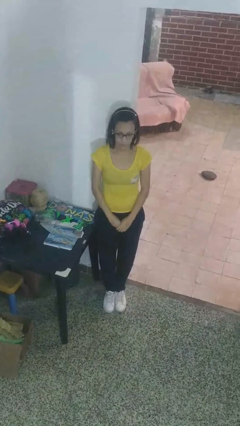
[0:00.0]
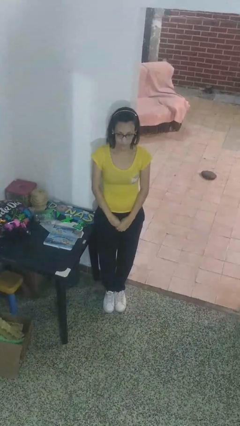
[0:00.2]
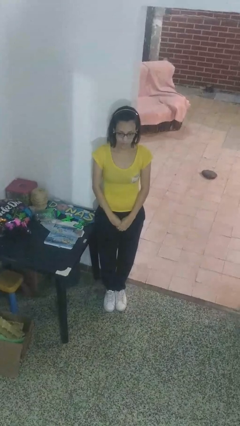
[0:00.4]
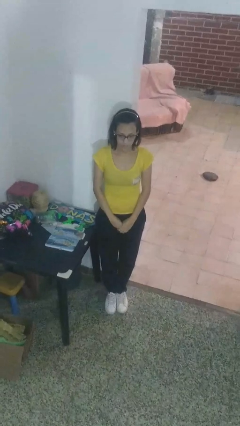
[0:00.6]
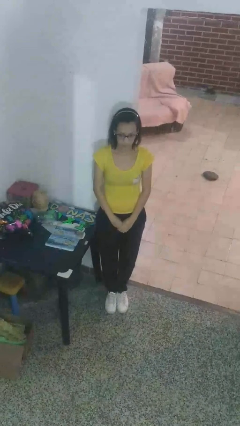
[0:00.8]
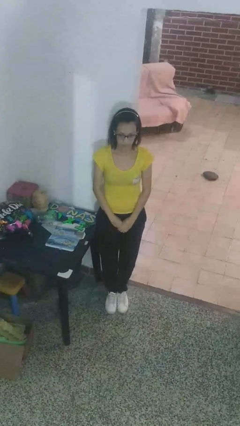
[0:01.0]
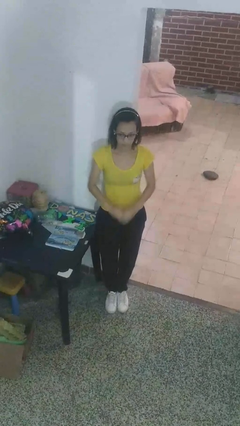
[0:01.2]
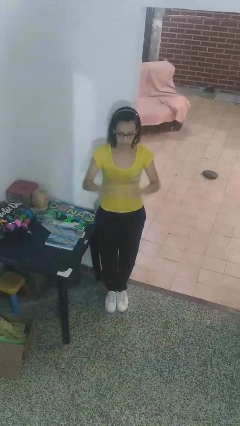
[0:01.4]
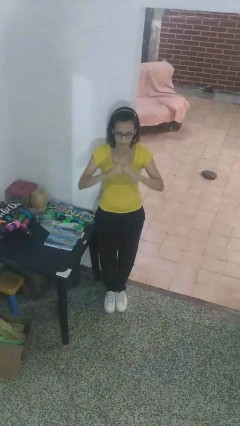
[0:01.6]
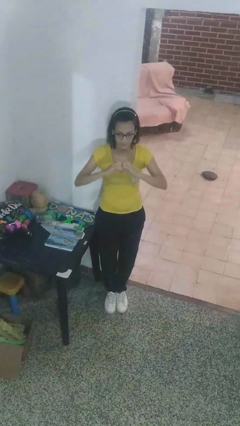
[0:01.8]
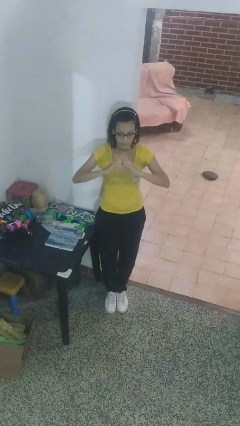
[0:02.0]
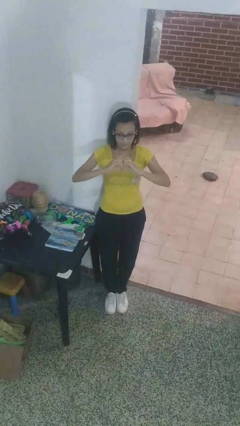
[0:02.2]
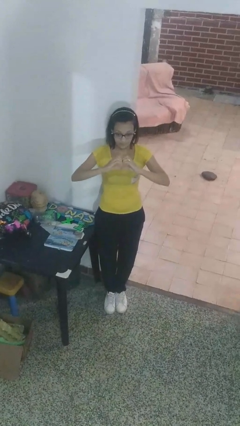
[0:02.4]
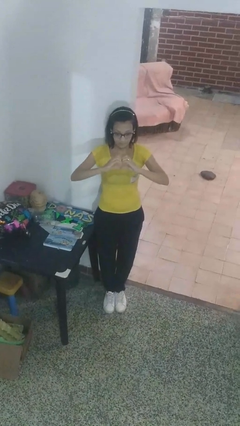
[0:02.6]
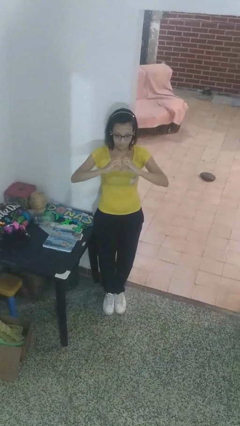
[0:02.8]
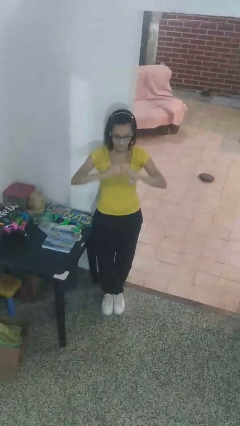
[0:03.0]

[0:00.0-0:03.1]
person gestures heart

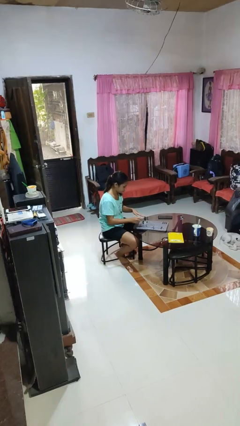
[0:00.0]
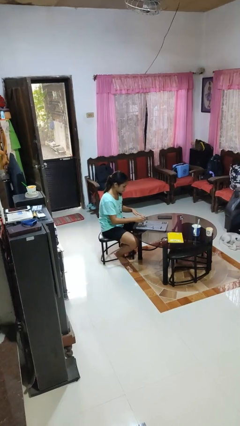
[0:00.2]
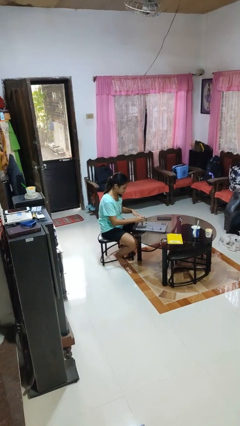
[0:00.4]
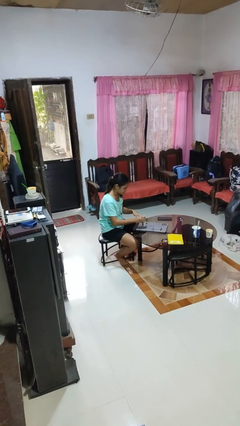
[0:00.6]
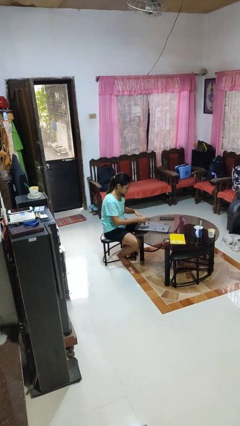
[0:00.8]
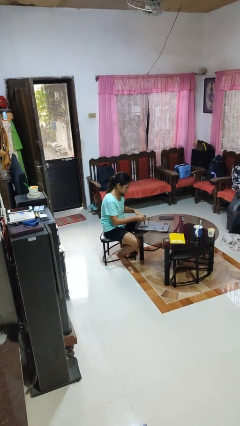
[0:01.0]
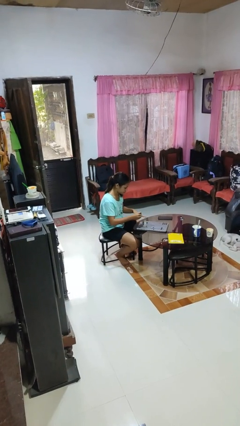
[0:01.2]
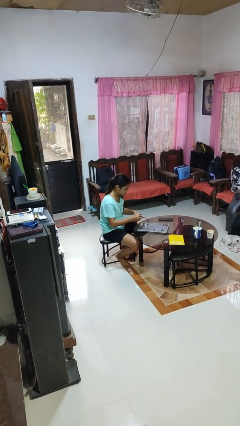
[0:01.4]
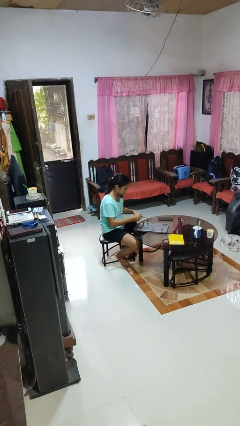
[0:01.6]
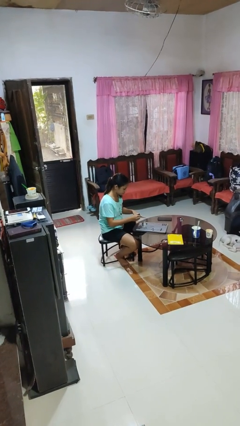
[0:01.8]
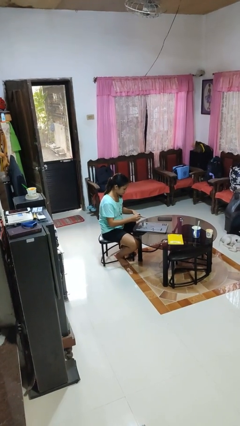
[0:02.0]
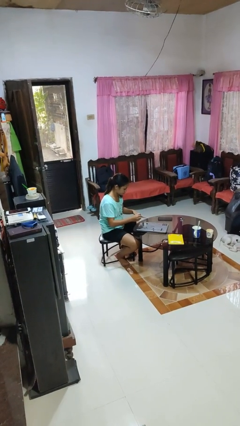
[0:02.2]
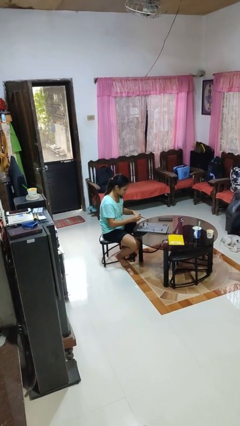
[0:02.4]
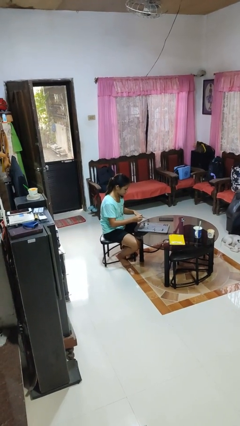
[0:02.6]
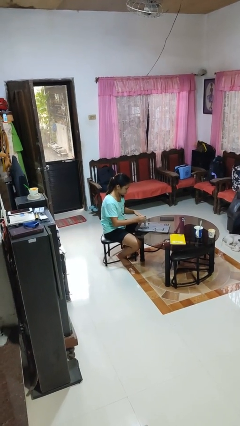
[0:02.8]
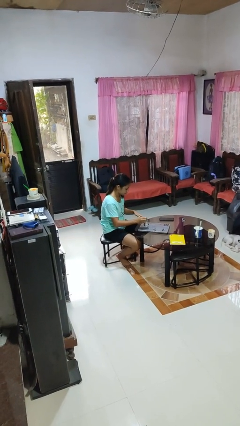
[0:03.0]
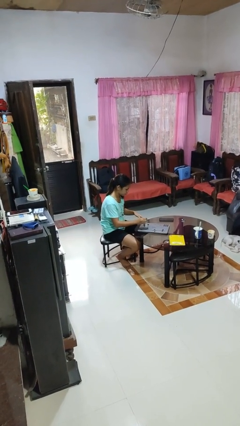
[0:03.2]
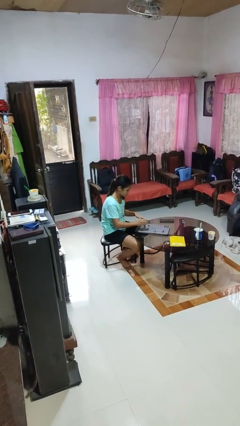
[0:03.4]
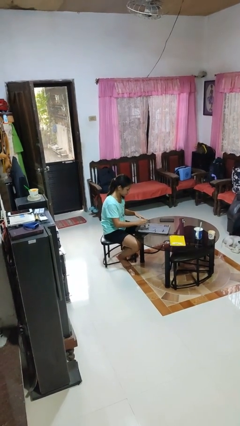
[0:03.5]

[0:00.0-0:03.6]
person paints fingernails

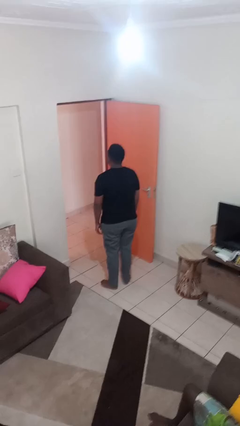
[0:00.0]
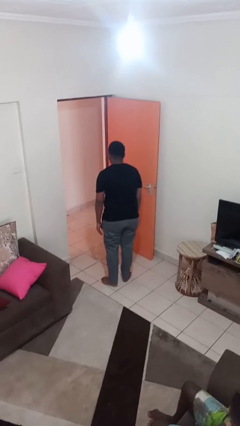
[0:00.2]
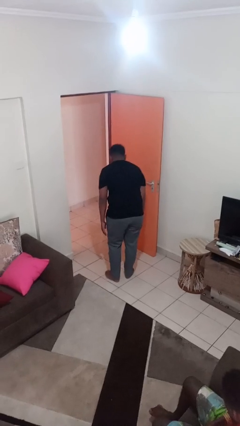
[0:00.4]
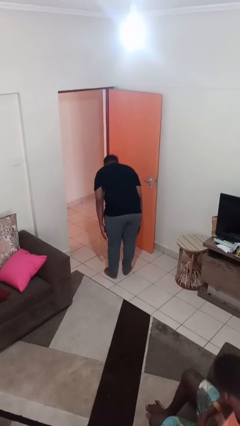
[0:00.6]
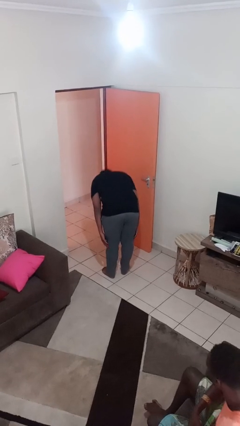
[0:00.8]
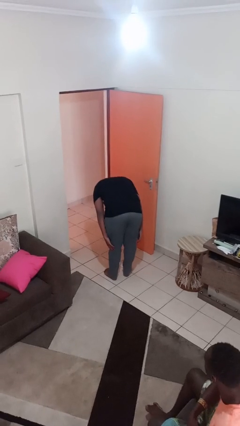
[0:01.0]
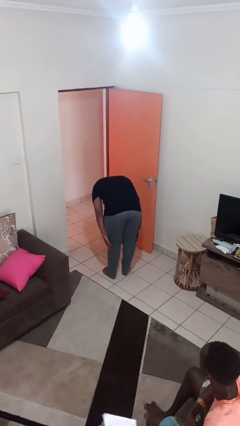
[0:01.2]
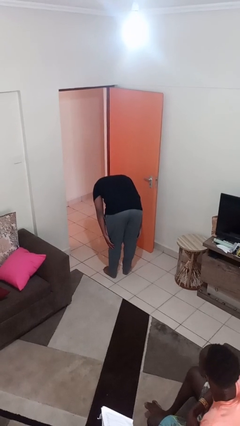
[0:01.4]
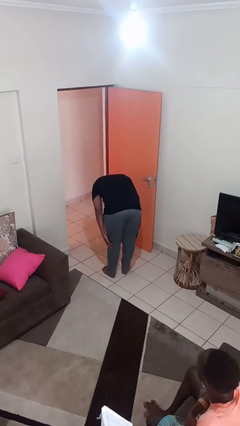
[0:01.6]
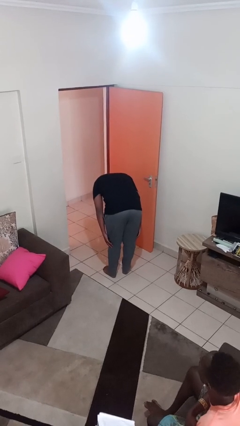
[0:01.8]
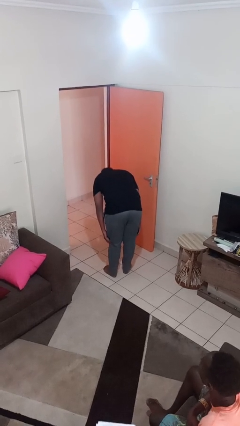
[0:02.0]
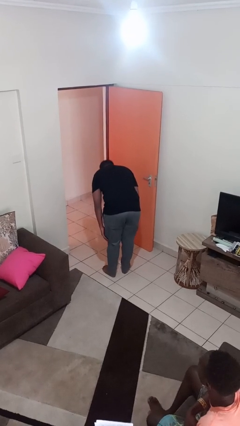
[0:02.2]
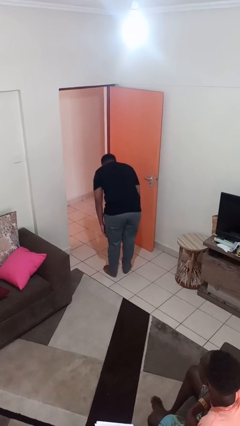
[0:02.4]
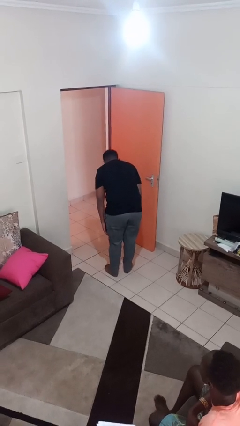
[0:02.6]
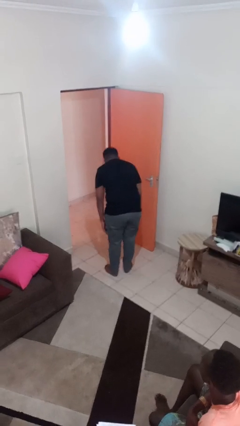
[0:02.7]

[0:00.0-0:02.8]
person bows

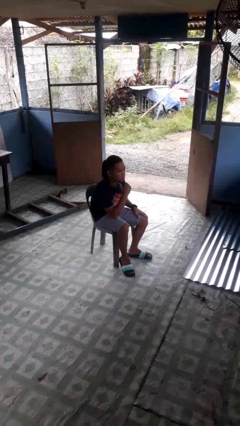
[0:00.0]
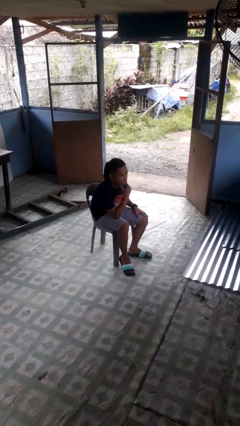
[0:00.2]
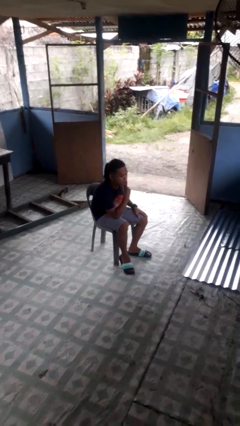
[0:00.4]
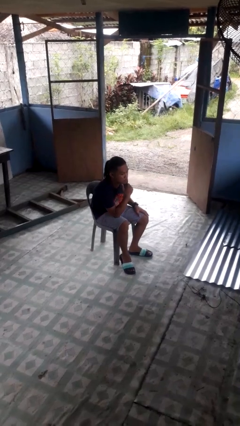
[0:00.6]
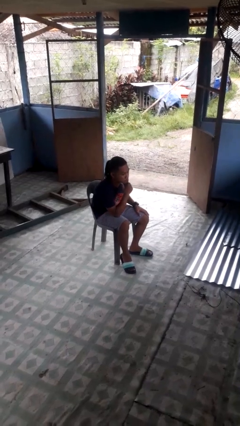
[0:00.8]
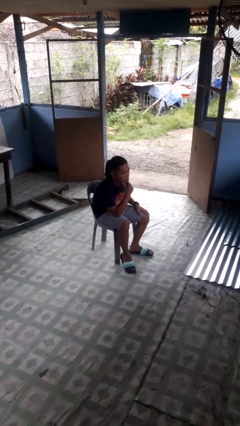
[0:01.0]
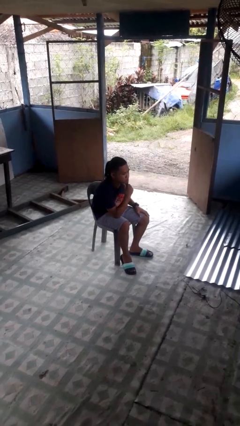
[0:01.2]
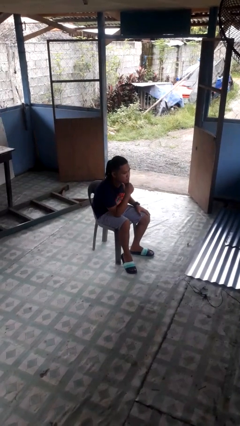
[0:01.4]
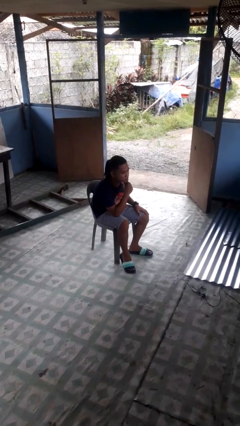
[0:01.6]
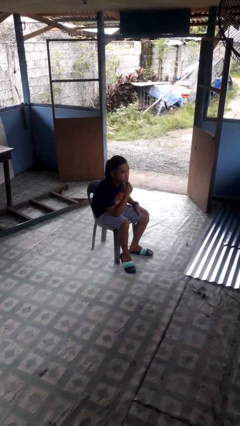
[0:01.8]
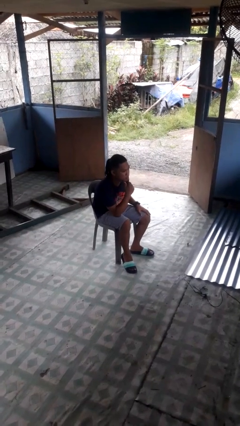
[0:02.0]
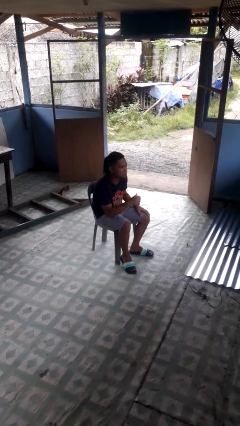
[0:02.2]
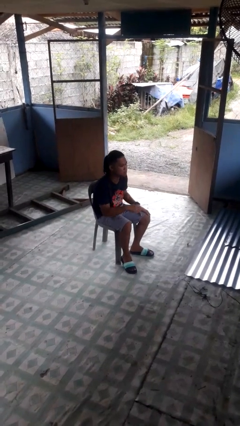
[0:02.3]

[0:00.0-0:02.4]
person strokes chin

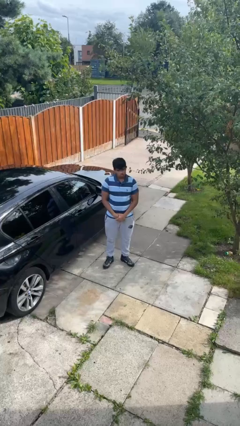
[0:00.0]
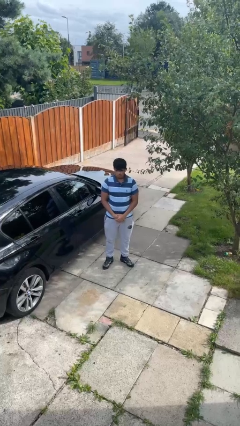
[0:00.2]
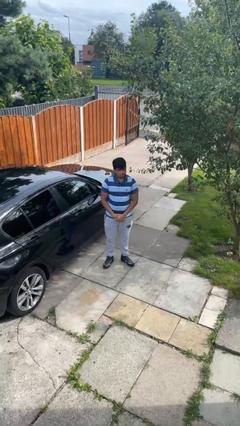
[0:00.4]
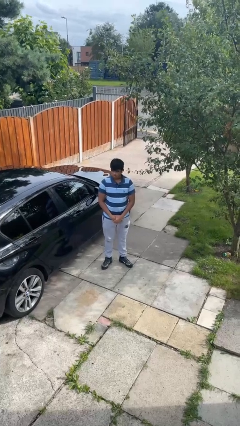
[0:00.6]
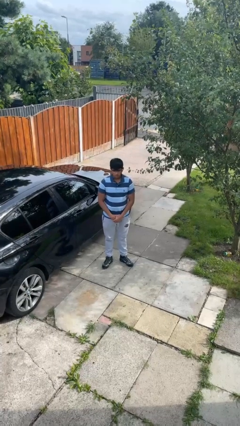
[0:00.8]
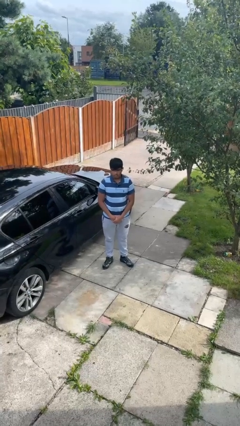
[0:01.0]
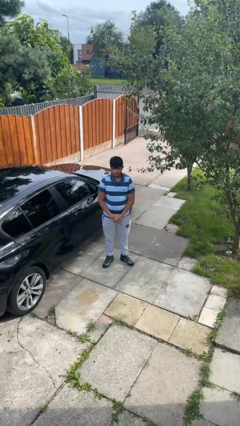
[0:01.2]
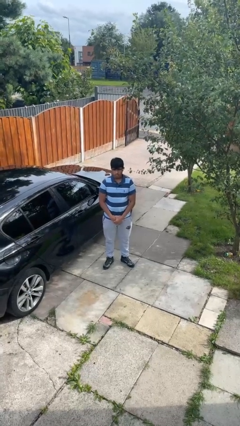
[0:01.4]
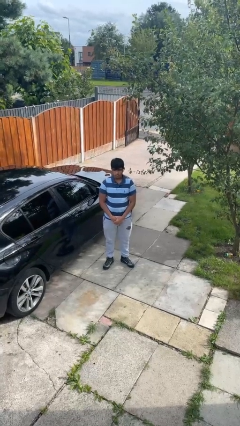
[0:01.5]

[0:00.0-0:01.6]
person shakes head

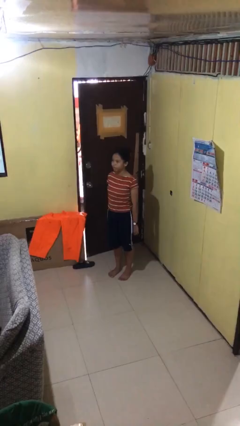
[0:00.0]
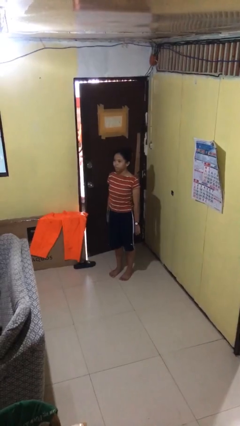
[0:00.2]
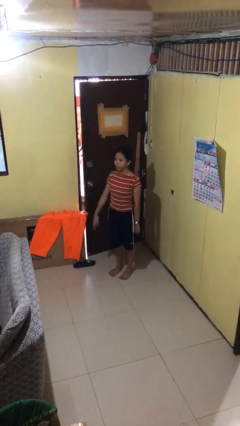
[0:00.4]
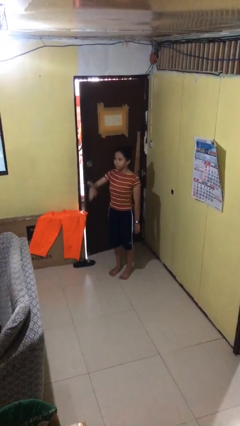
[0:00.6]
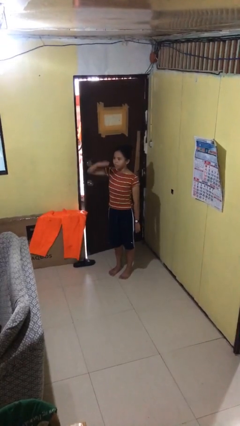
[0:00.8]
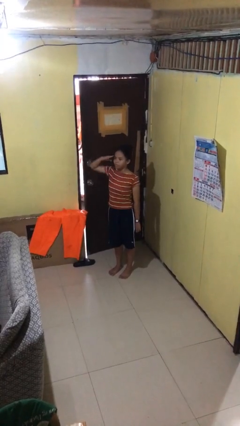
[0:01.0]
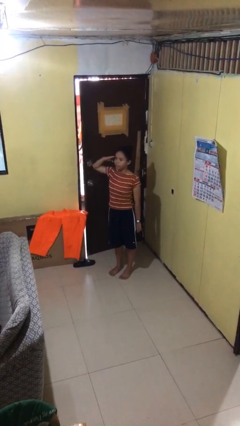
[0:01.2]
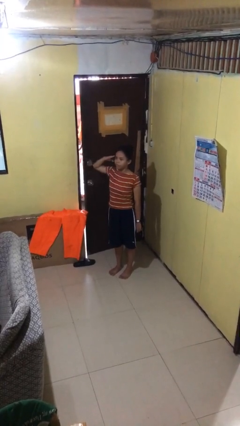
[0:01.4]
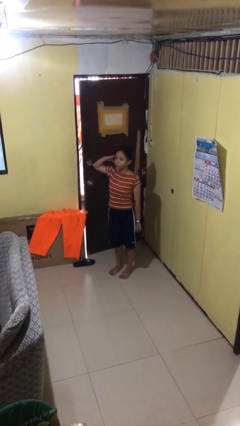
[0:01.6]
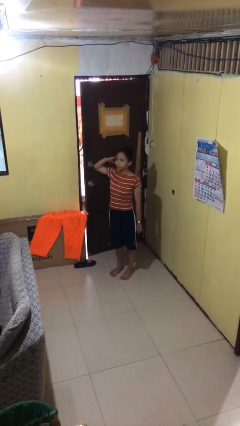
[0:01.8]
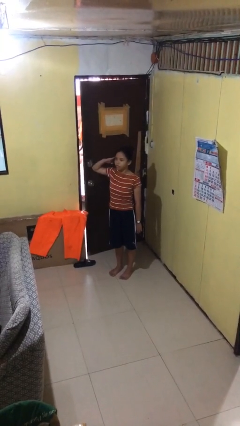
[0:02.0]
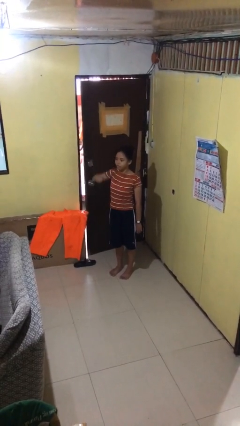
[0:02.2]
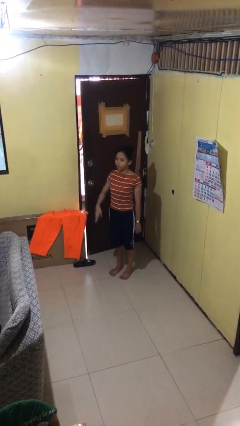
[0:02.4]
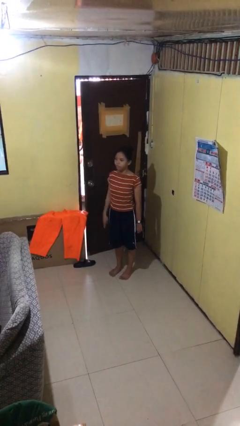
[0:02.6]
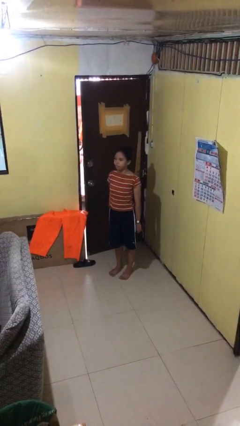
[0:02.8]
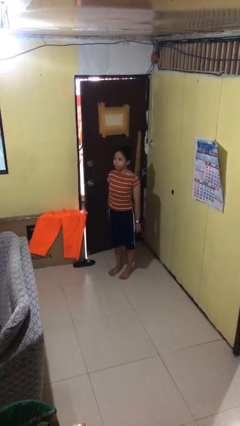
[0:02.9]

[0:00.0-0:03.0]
person salutes

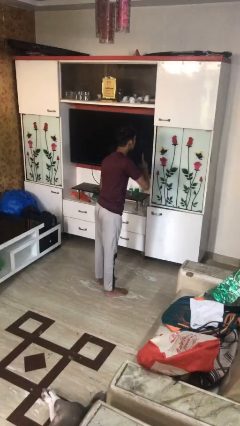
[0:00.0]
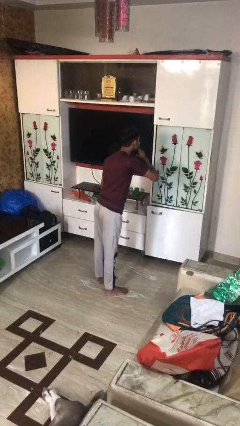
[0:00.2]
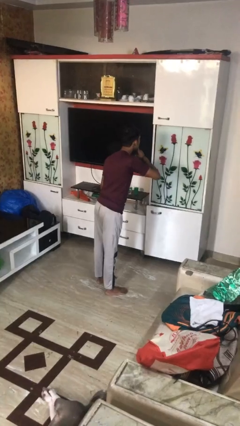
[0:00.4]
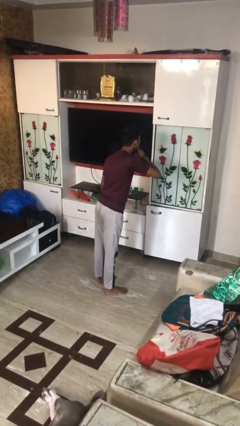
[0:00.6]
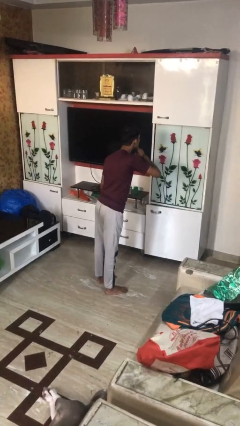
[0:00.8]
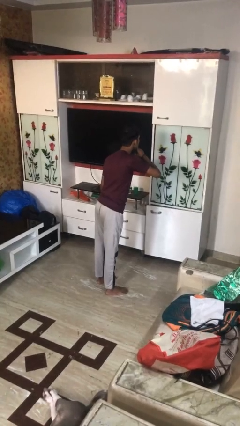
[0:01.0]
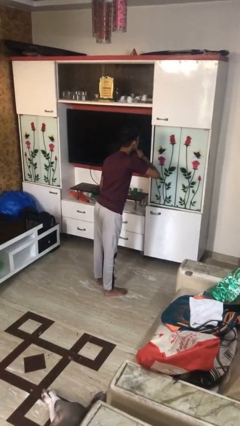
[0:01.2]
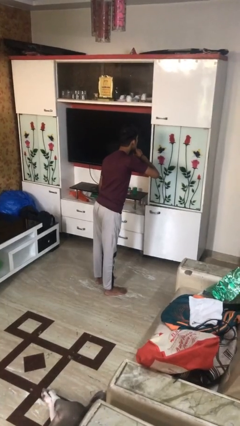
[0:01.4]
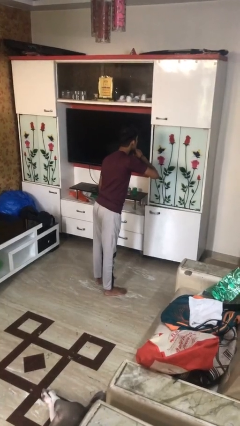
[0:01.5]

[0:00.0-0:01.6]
person gestures be quiet
